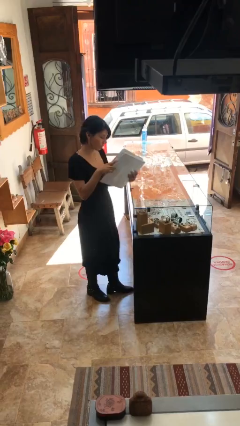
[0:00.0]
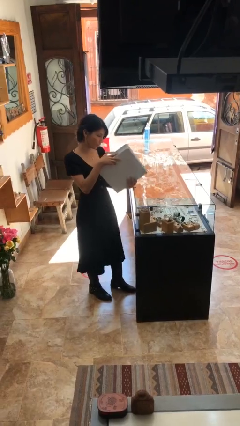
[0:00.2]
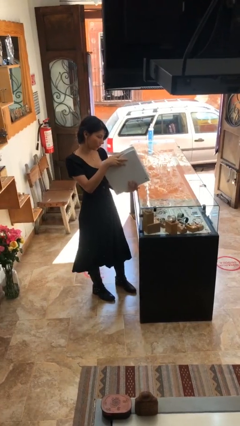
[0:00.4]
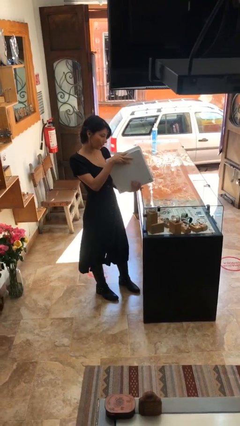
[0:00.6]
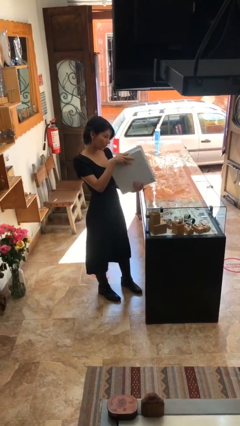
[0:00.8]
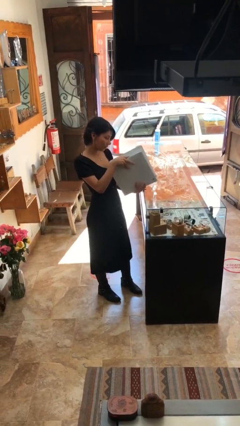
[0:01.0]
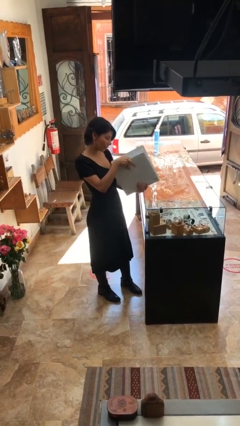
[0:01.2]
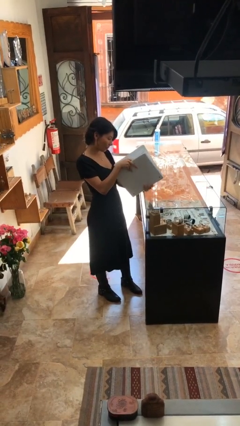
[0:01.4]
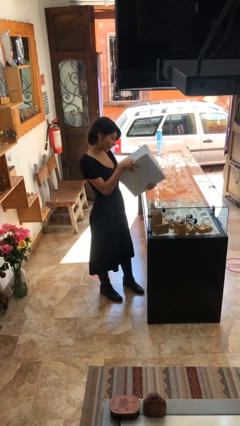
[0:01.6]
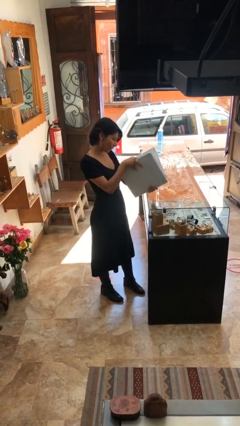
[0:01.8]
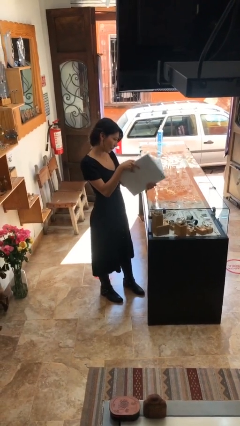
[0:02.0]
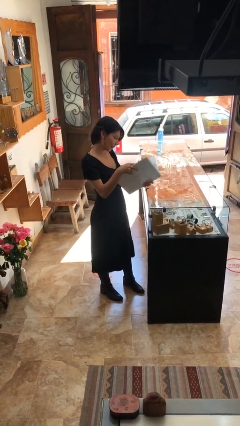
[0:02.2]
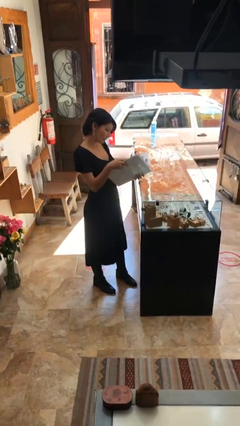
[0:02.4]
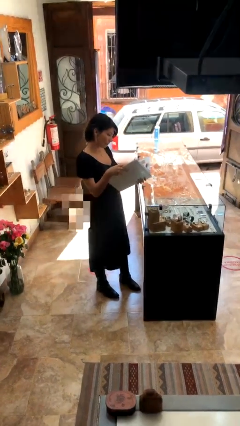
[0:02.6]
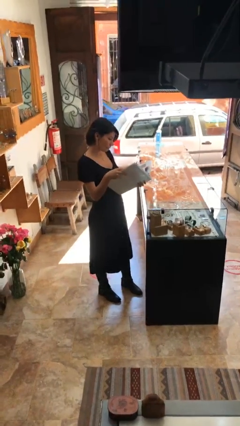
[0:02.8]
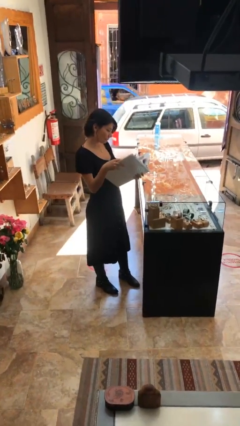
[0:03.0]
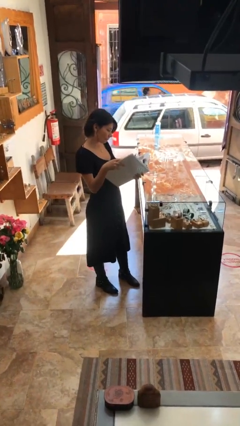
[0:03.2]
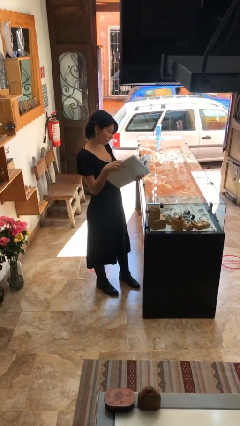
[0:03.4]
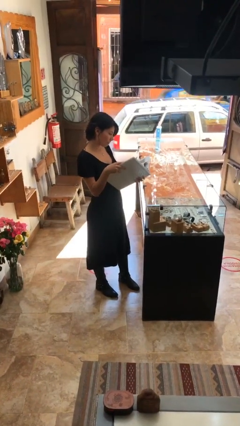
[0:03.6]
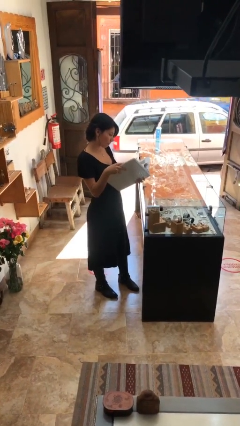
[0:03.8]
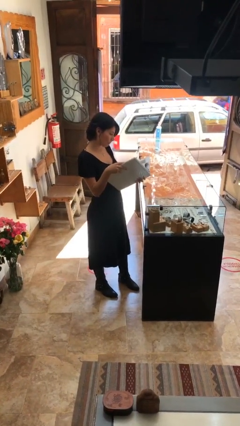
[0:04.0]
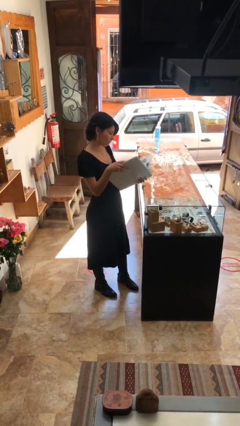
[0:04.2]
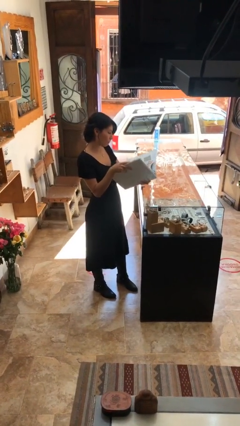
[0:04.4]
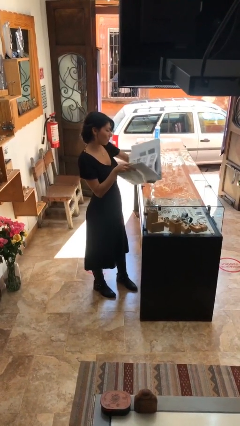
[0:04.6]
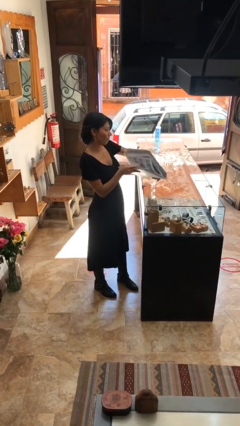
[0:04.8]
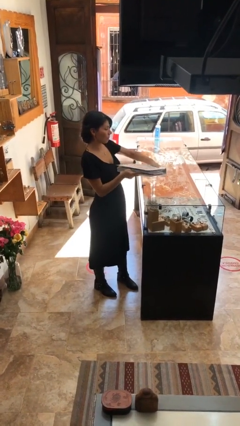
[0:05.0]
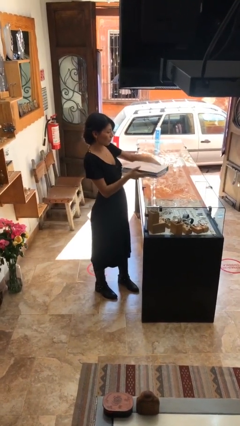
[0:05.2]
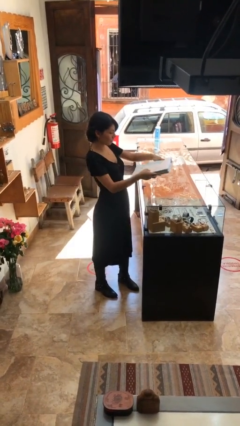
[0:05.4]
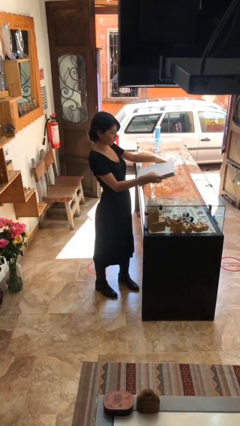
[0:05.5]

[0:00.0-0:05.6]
person reads document

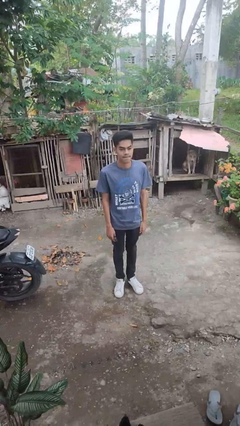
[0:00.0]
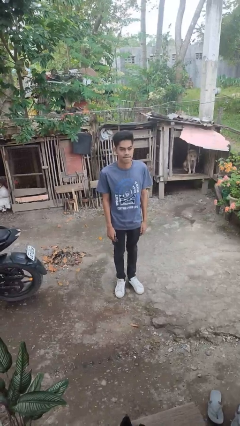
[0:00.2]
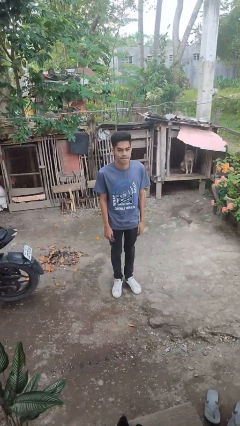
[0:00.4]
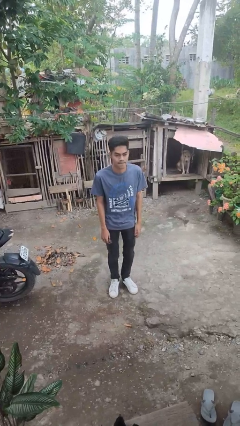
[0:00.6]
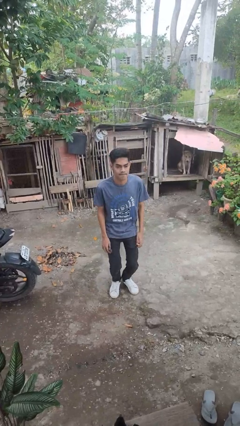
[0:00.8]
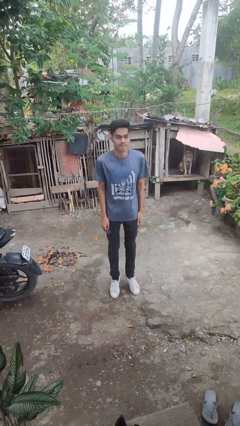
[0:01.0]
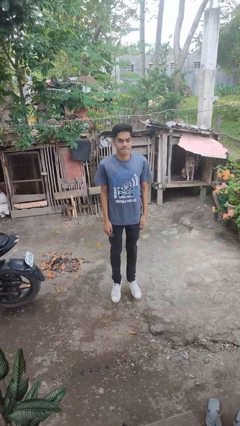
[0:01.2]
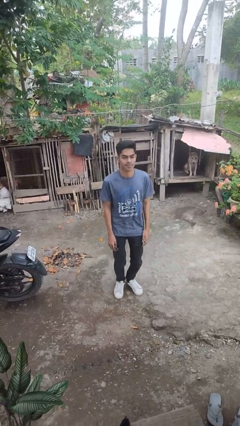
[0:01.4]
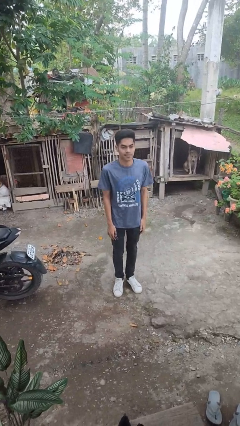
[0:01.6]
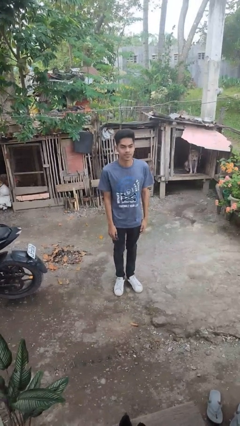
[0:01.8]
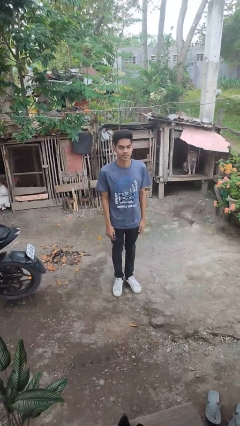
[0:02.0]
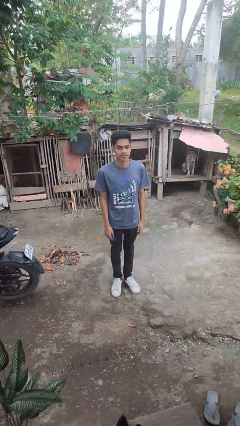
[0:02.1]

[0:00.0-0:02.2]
person jumps

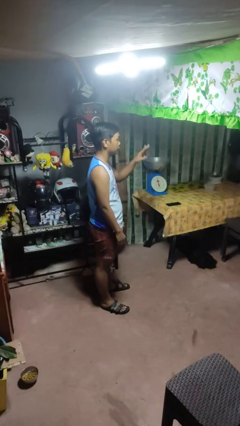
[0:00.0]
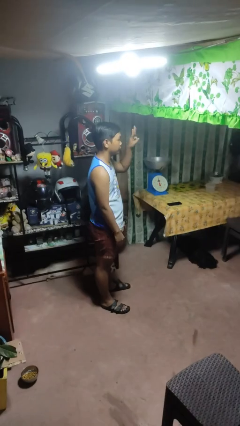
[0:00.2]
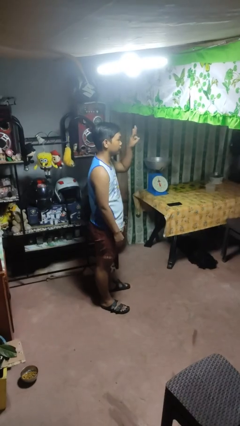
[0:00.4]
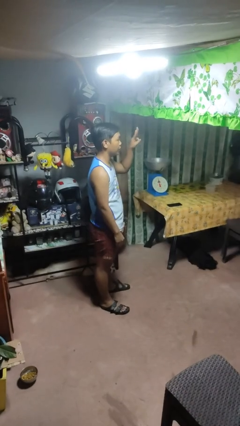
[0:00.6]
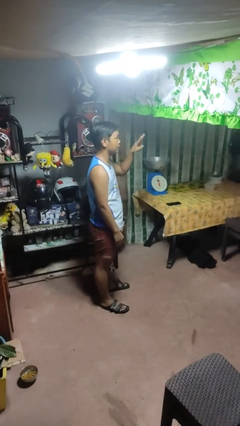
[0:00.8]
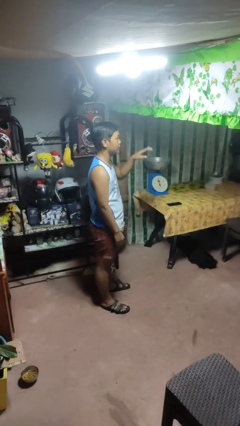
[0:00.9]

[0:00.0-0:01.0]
person gestures number three

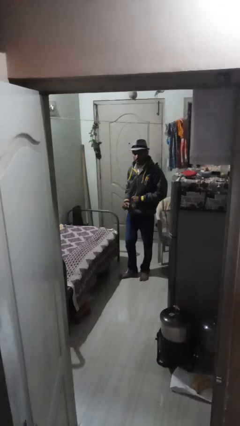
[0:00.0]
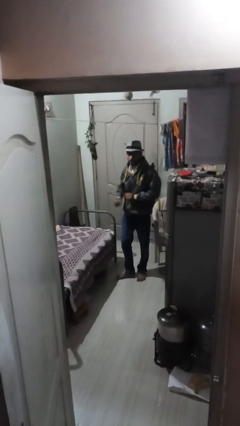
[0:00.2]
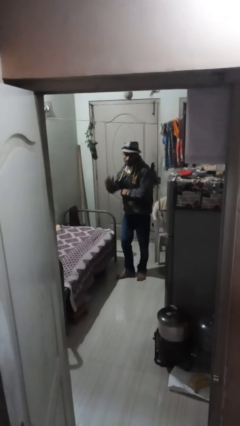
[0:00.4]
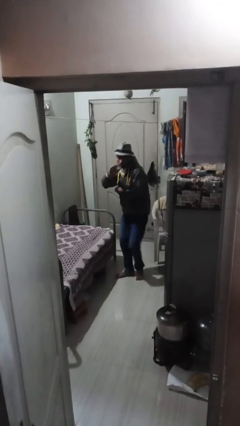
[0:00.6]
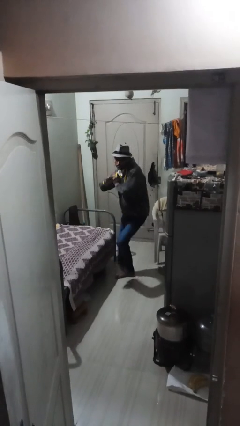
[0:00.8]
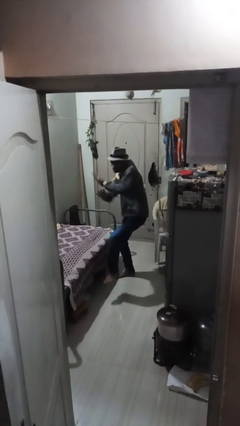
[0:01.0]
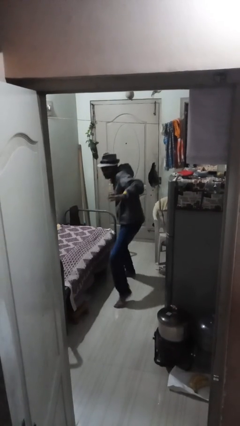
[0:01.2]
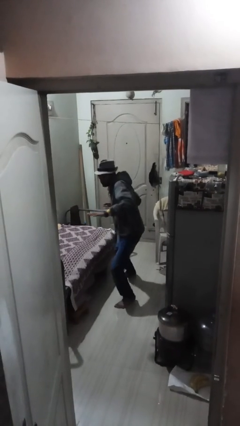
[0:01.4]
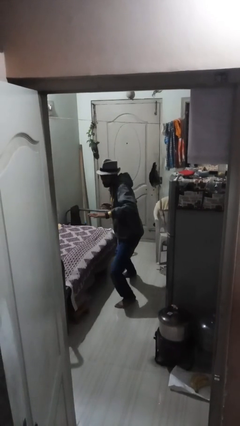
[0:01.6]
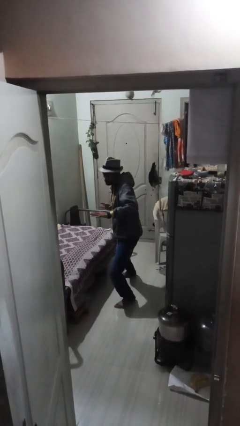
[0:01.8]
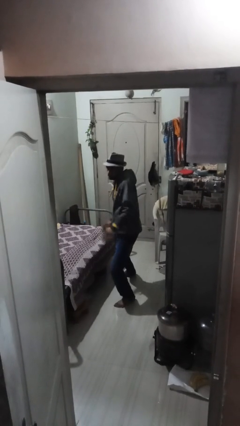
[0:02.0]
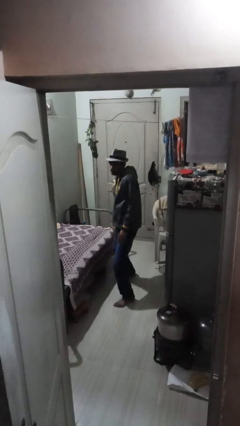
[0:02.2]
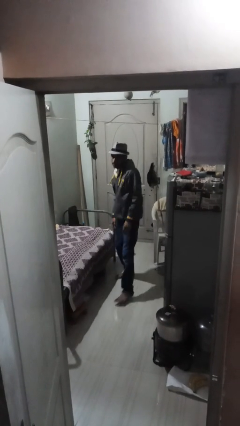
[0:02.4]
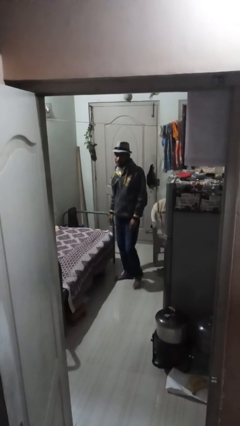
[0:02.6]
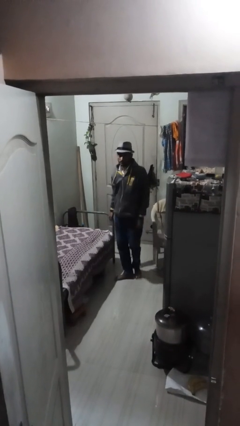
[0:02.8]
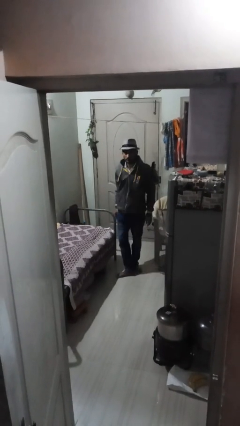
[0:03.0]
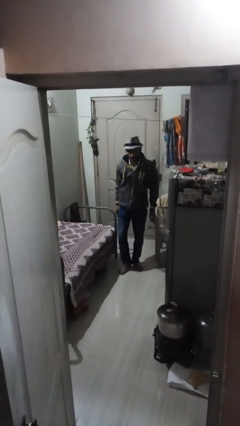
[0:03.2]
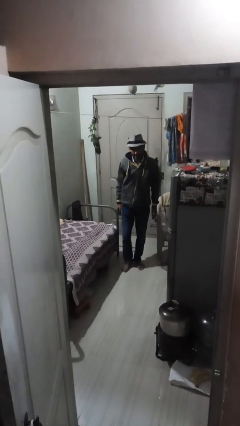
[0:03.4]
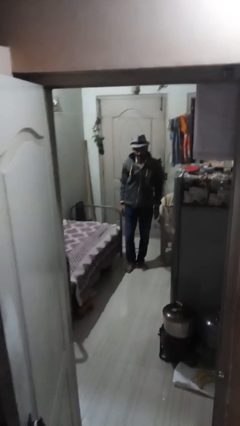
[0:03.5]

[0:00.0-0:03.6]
person karate chop

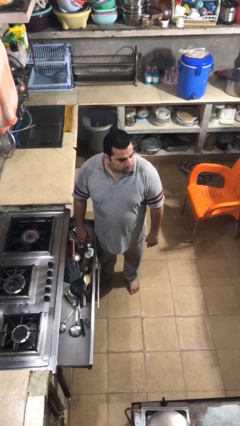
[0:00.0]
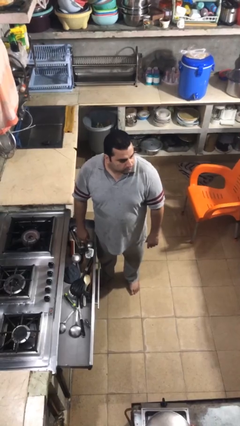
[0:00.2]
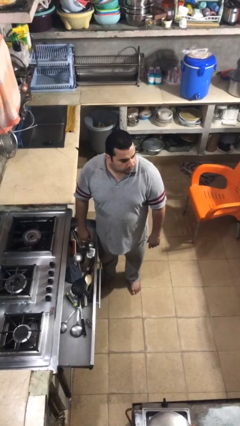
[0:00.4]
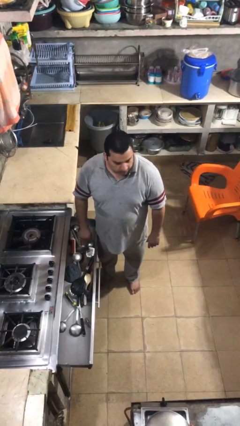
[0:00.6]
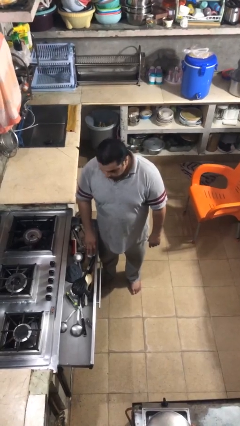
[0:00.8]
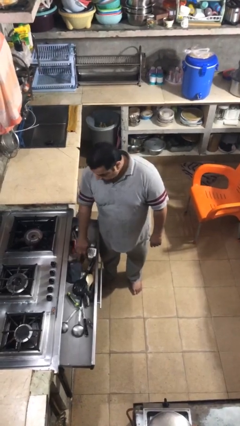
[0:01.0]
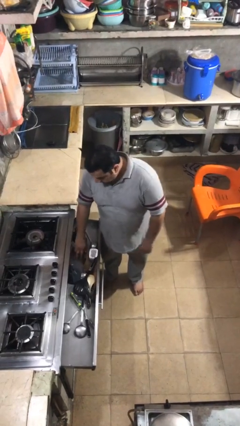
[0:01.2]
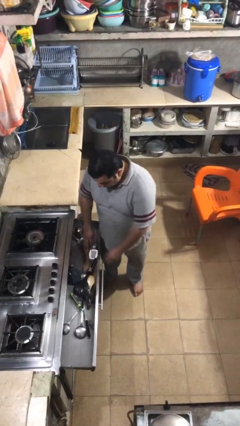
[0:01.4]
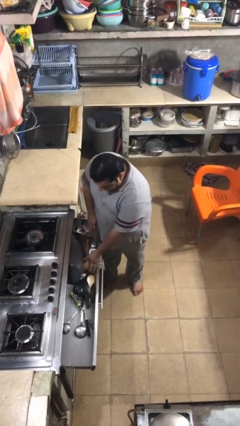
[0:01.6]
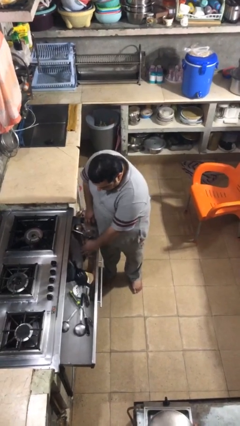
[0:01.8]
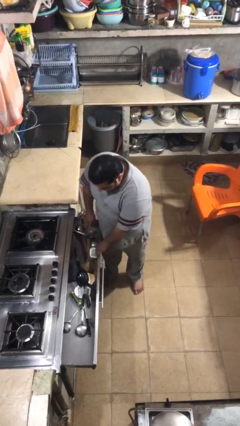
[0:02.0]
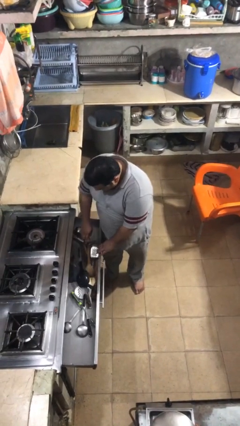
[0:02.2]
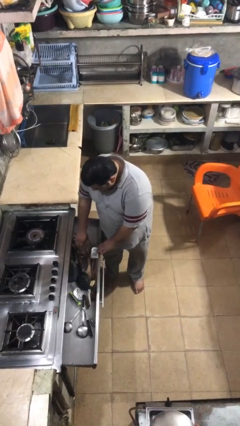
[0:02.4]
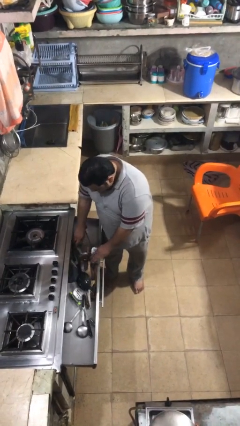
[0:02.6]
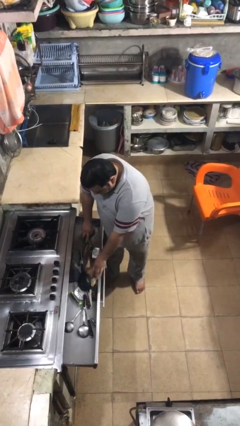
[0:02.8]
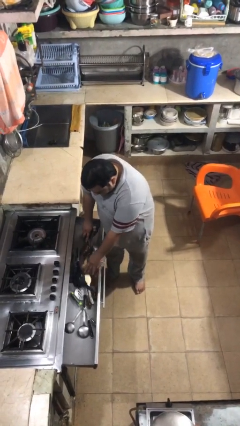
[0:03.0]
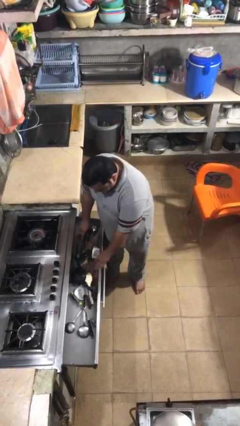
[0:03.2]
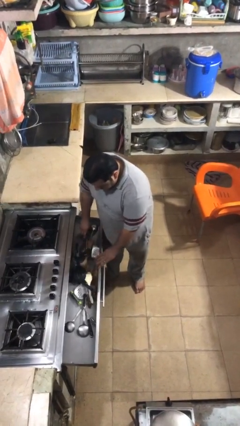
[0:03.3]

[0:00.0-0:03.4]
person searches in kitchen drawer

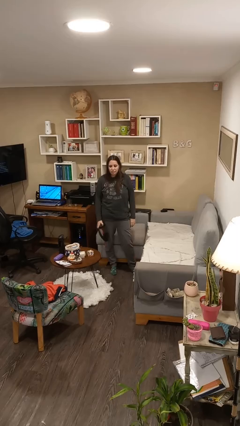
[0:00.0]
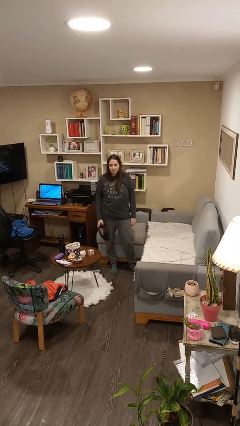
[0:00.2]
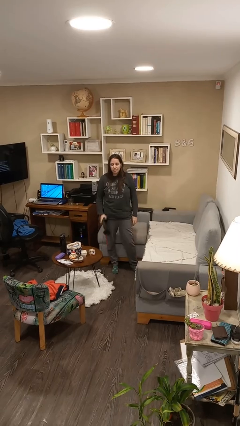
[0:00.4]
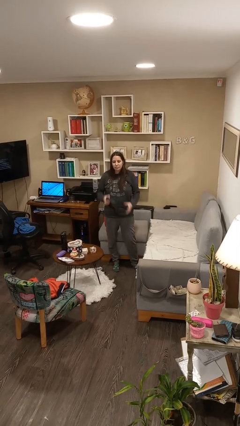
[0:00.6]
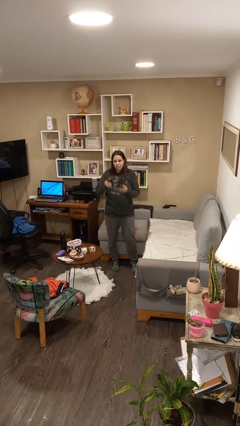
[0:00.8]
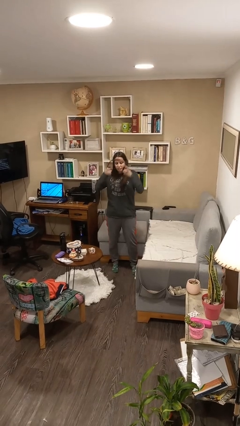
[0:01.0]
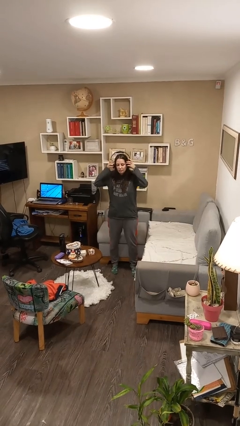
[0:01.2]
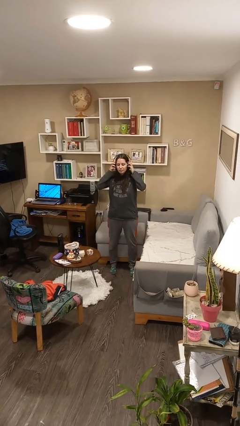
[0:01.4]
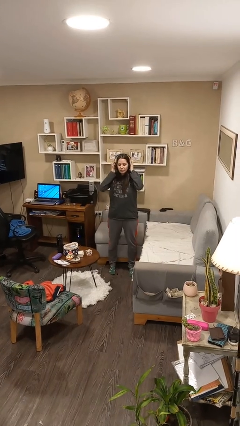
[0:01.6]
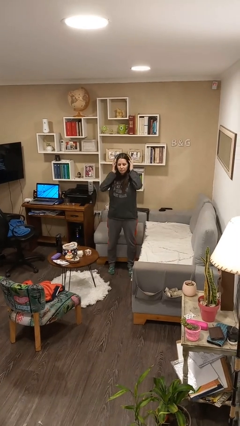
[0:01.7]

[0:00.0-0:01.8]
person puts on headphones
